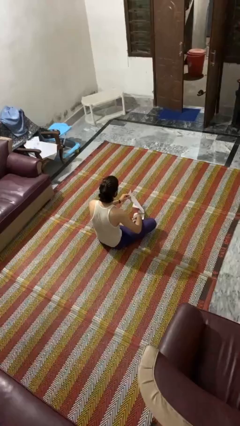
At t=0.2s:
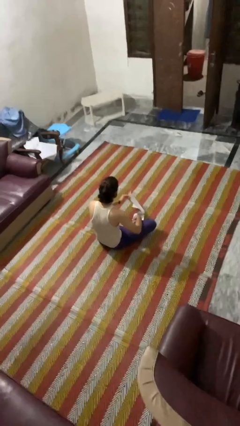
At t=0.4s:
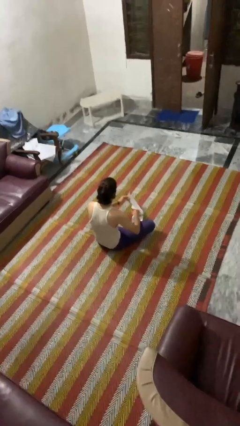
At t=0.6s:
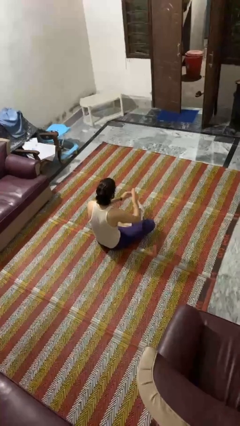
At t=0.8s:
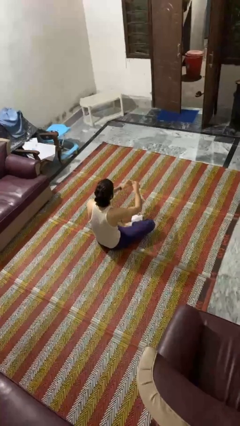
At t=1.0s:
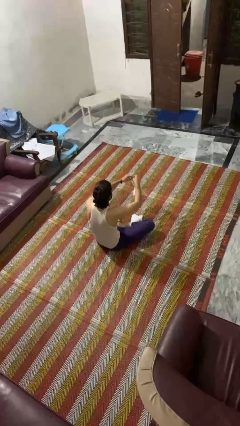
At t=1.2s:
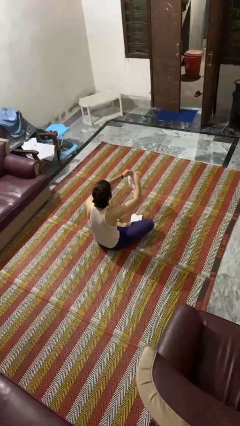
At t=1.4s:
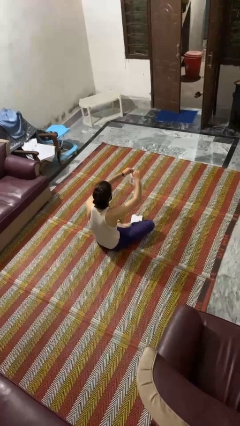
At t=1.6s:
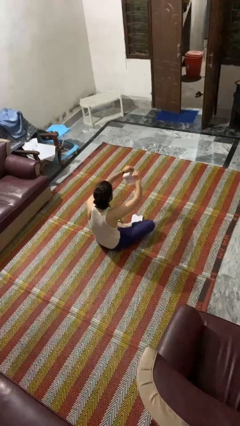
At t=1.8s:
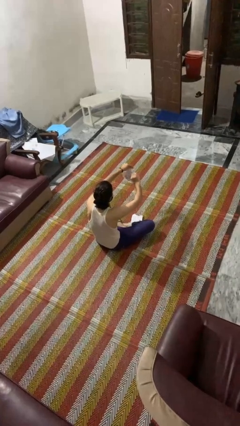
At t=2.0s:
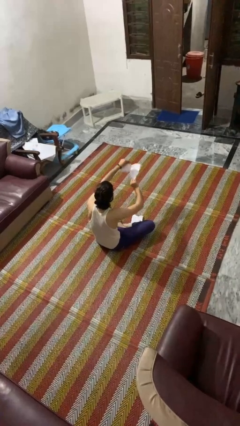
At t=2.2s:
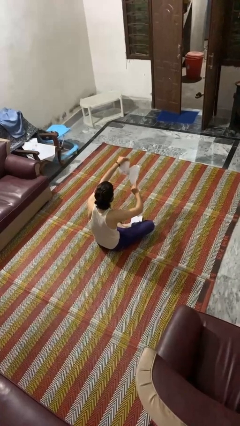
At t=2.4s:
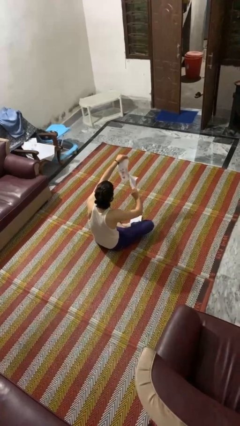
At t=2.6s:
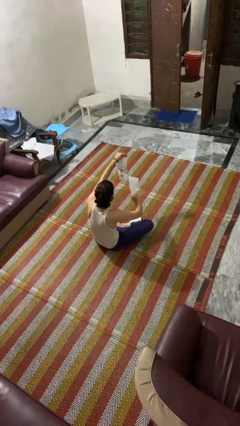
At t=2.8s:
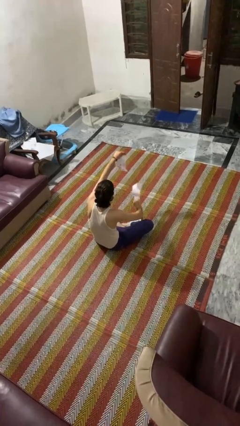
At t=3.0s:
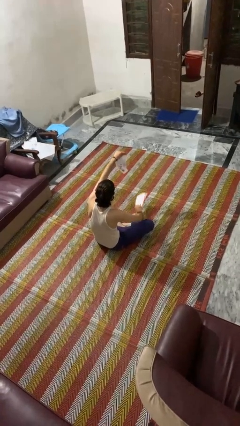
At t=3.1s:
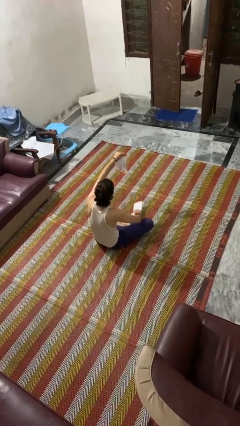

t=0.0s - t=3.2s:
person tears paper

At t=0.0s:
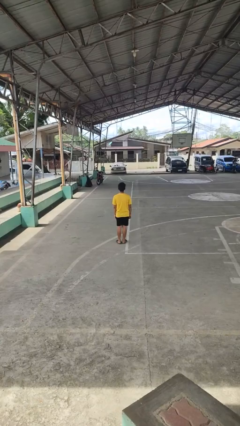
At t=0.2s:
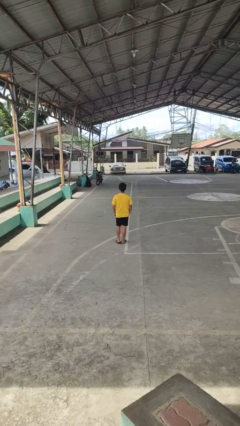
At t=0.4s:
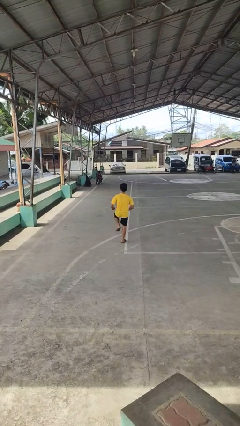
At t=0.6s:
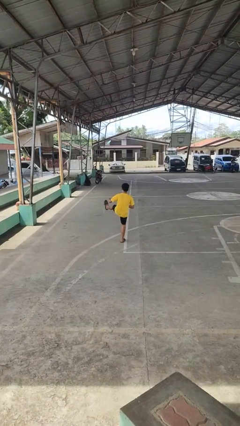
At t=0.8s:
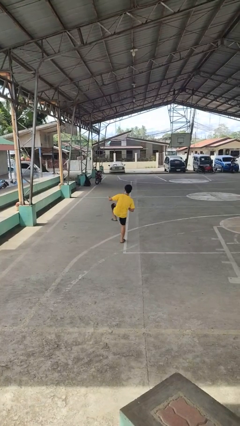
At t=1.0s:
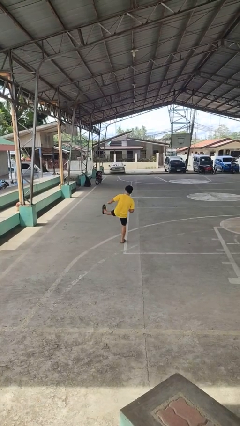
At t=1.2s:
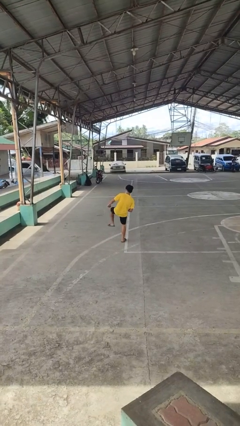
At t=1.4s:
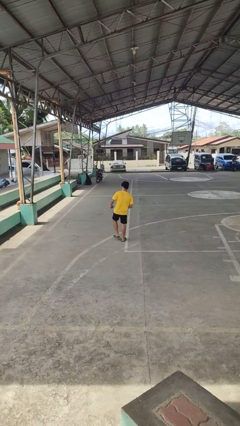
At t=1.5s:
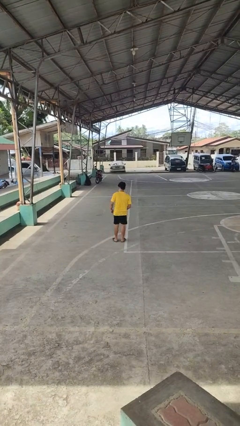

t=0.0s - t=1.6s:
person karate kicks

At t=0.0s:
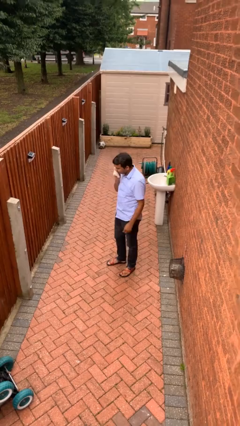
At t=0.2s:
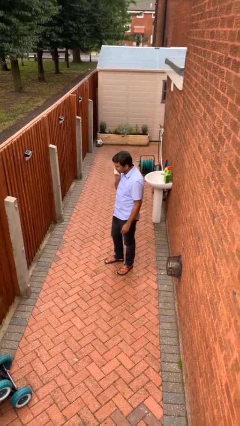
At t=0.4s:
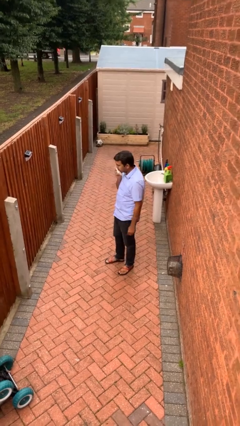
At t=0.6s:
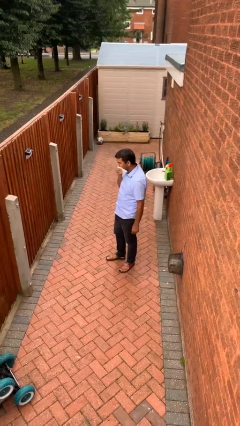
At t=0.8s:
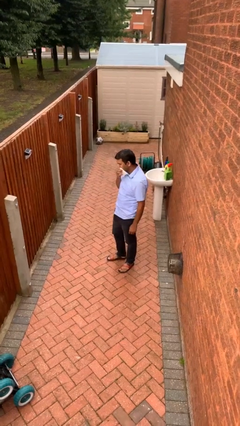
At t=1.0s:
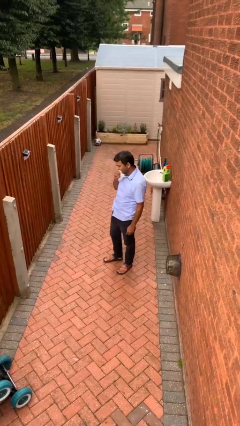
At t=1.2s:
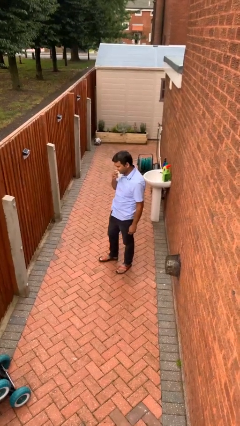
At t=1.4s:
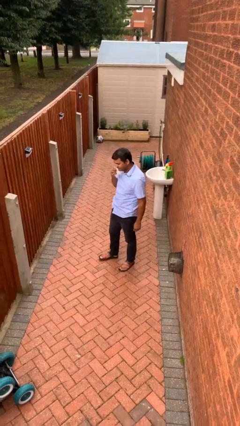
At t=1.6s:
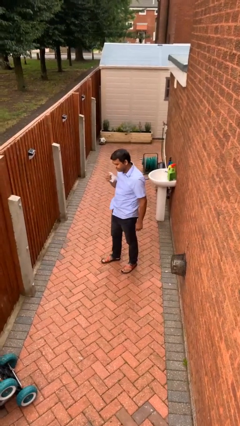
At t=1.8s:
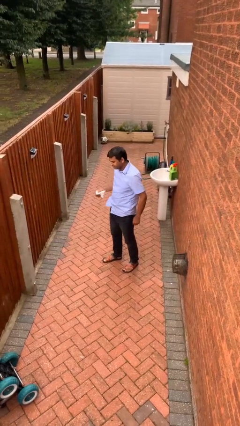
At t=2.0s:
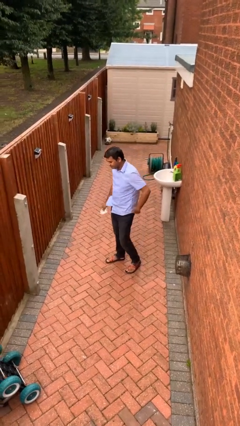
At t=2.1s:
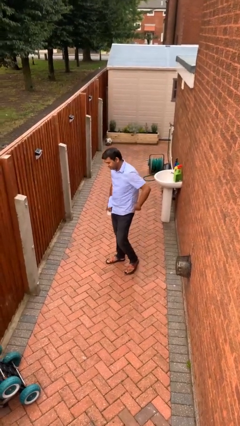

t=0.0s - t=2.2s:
person wipes mouth with napkin

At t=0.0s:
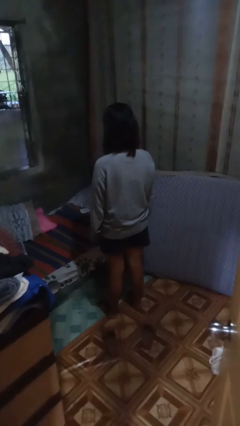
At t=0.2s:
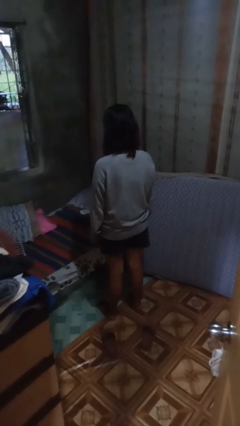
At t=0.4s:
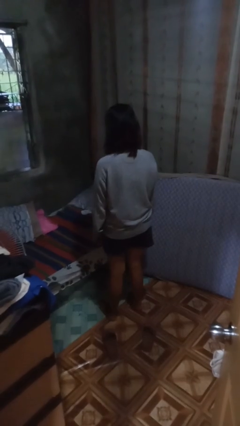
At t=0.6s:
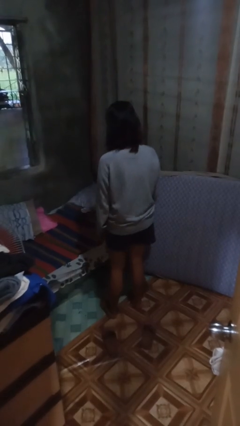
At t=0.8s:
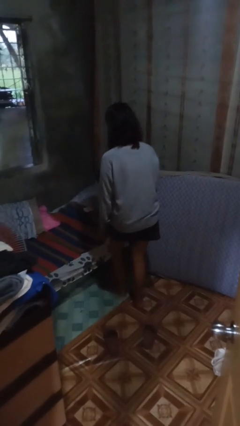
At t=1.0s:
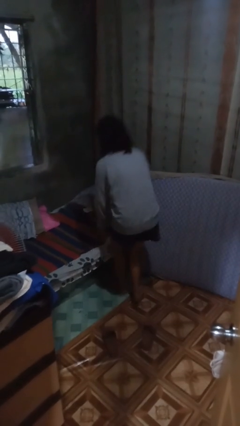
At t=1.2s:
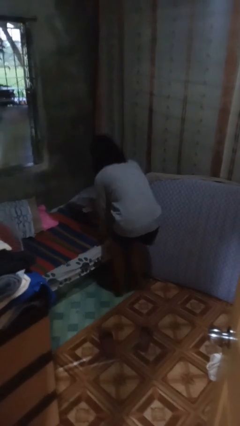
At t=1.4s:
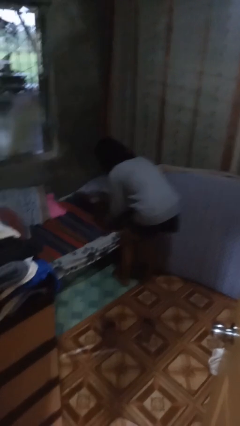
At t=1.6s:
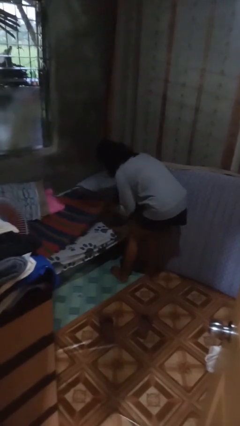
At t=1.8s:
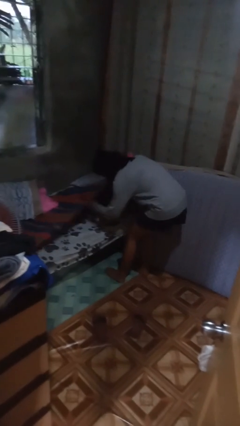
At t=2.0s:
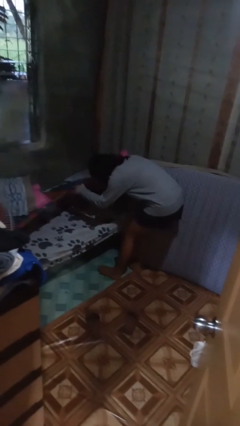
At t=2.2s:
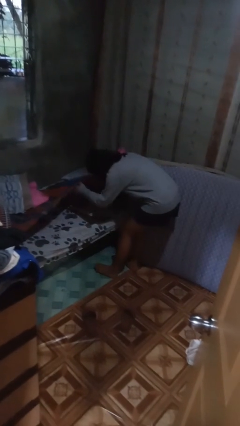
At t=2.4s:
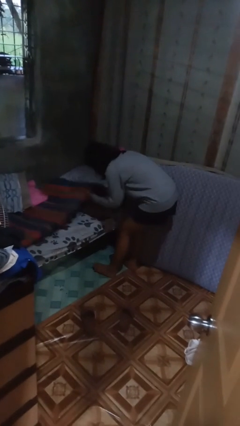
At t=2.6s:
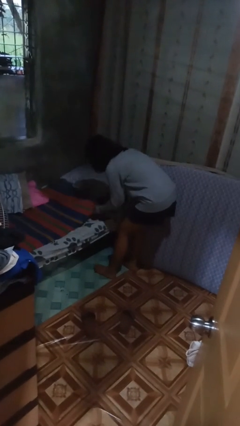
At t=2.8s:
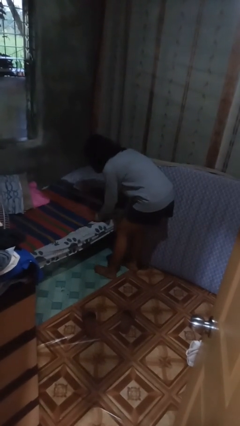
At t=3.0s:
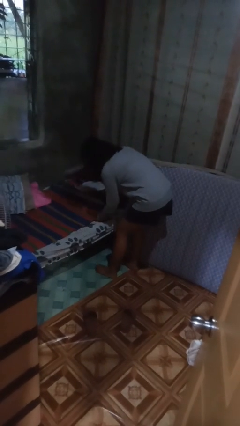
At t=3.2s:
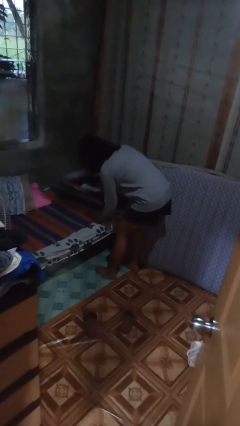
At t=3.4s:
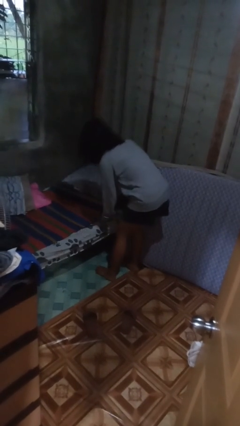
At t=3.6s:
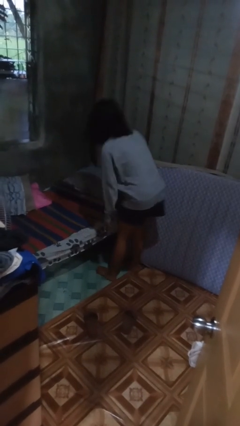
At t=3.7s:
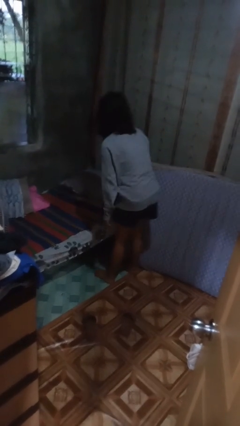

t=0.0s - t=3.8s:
person searches under bed

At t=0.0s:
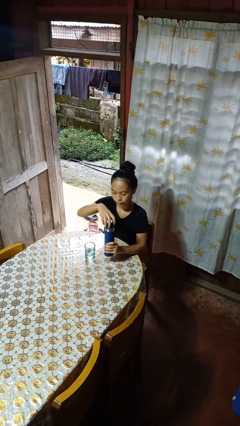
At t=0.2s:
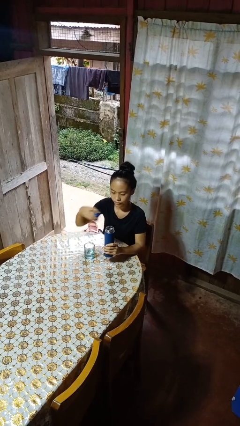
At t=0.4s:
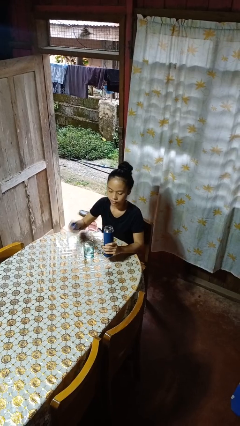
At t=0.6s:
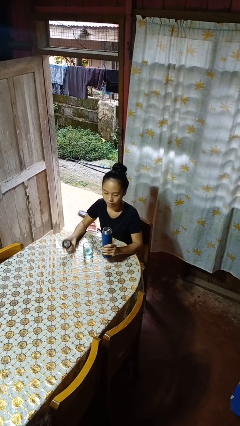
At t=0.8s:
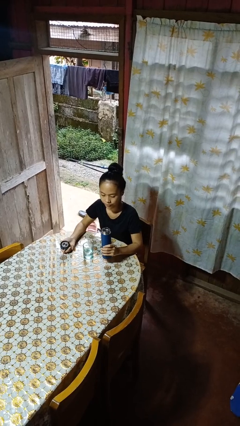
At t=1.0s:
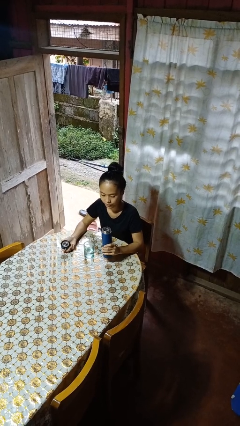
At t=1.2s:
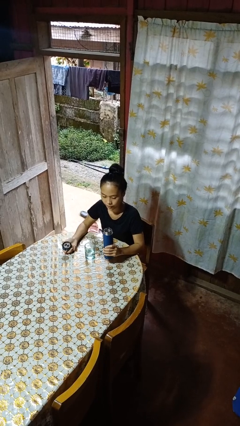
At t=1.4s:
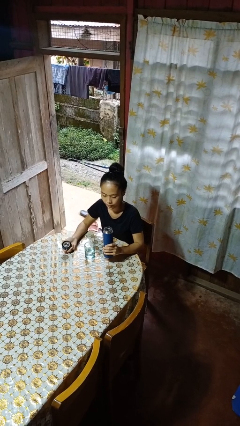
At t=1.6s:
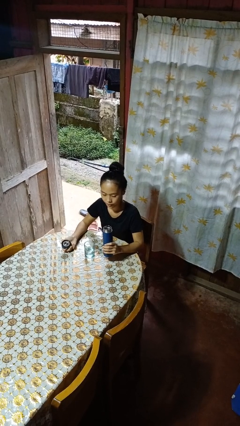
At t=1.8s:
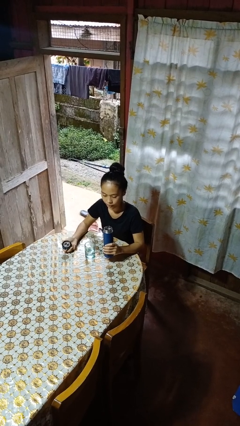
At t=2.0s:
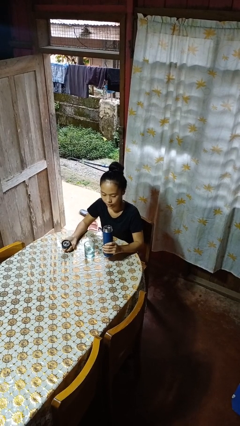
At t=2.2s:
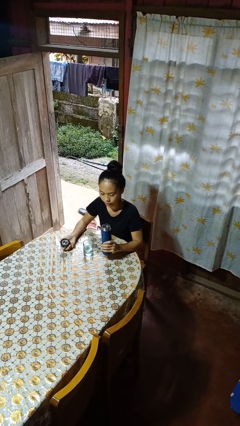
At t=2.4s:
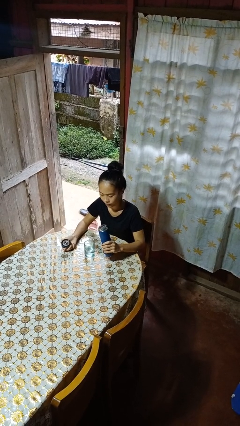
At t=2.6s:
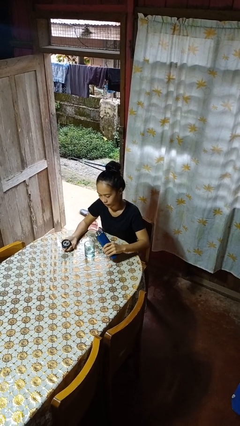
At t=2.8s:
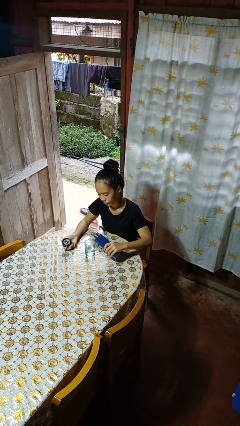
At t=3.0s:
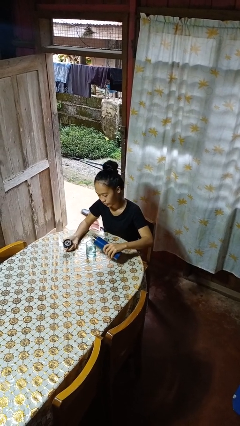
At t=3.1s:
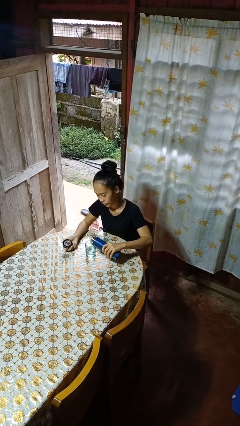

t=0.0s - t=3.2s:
person unscrews lid from bottle

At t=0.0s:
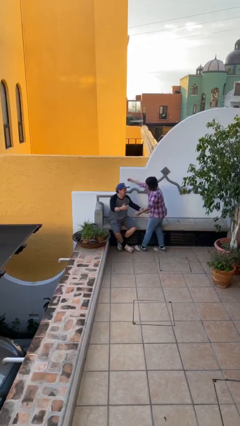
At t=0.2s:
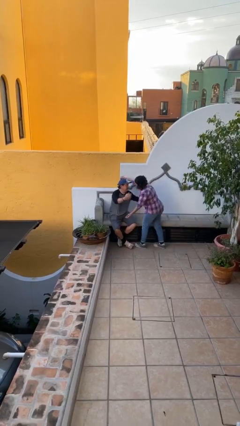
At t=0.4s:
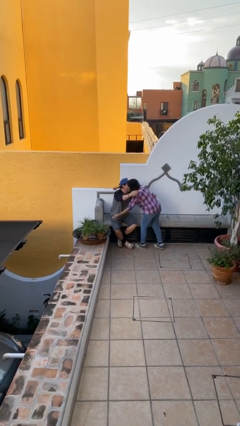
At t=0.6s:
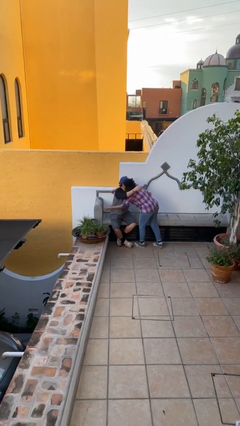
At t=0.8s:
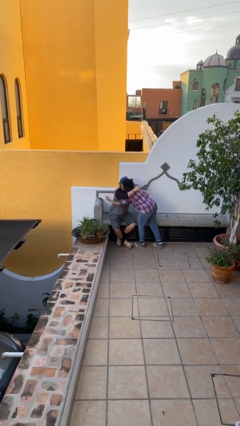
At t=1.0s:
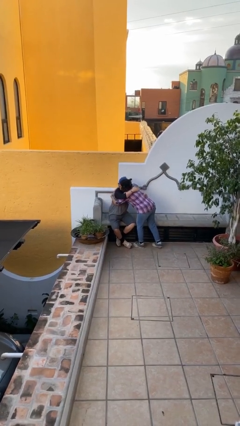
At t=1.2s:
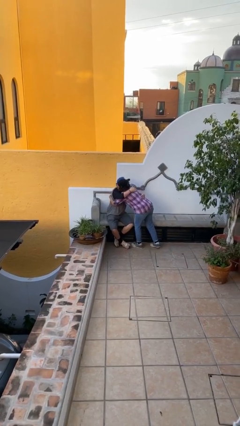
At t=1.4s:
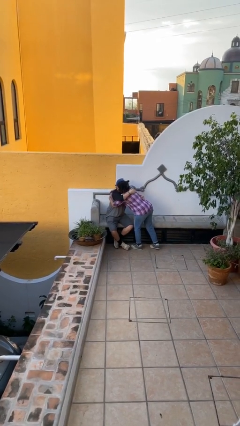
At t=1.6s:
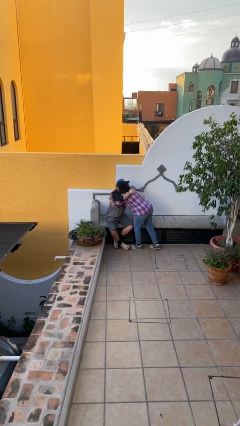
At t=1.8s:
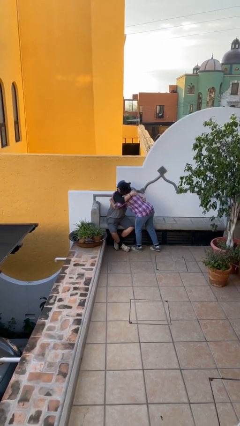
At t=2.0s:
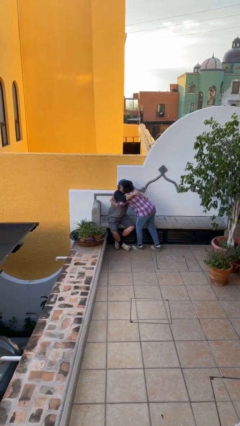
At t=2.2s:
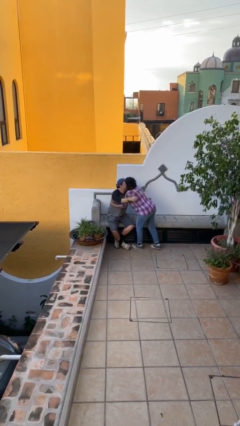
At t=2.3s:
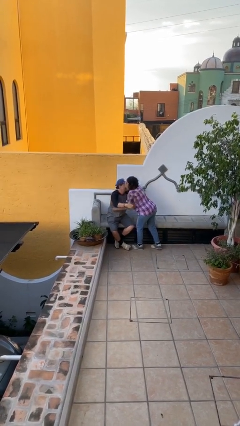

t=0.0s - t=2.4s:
person embraces person

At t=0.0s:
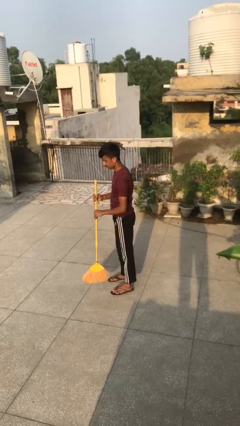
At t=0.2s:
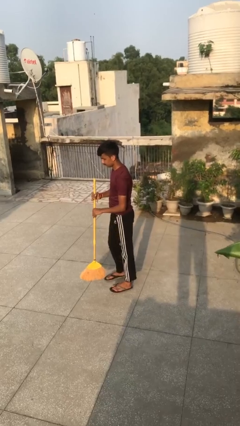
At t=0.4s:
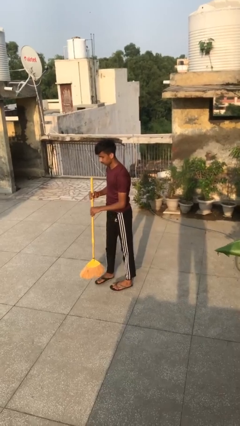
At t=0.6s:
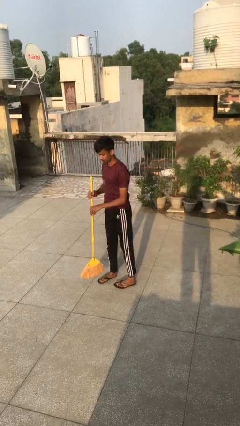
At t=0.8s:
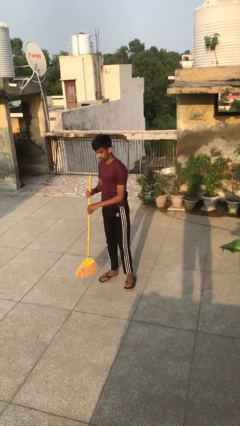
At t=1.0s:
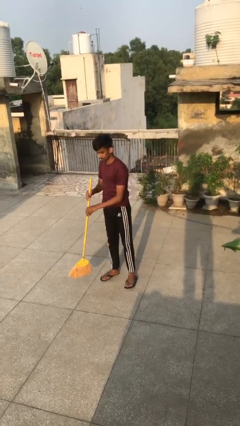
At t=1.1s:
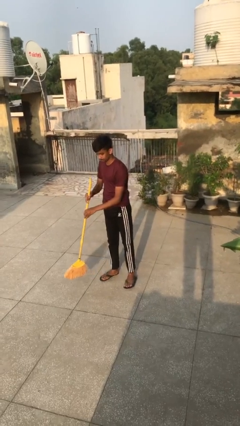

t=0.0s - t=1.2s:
person sweeps floor
